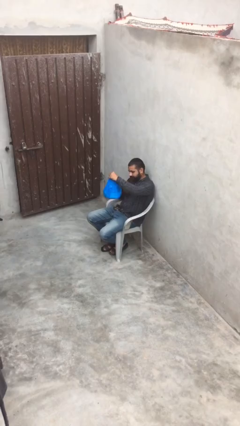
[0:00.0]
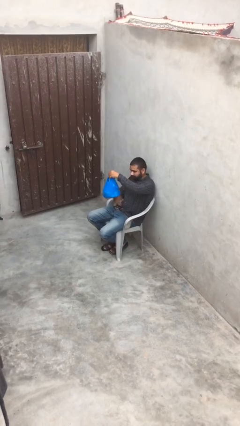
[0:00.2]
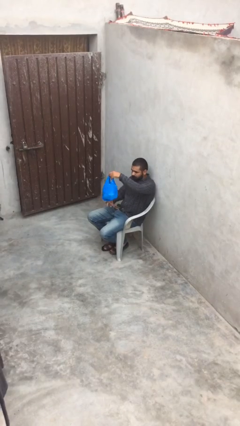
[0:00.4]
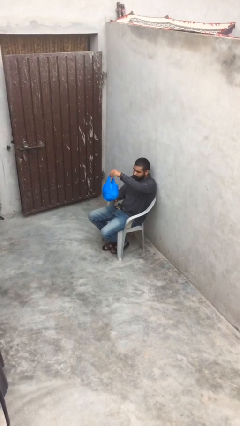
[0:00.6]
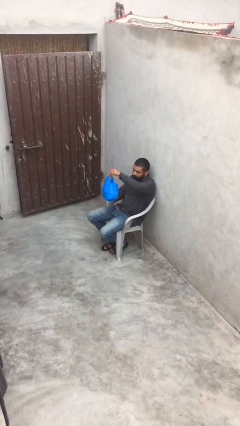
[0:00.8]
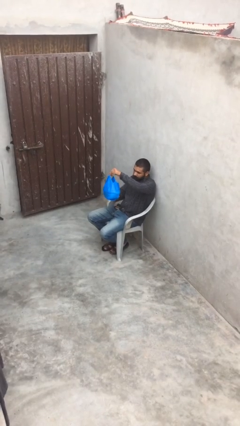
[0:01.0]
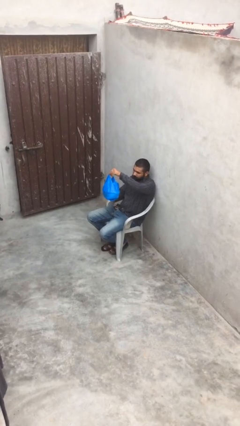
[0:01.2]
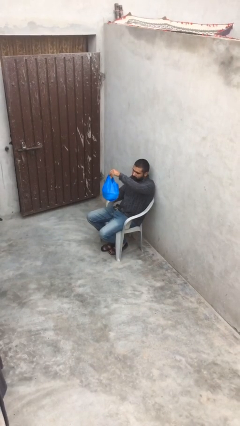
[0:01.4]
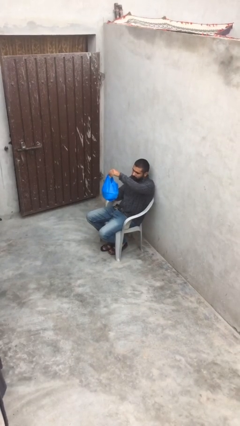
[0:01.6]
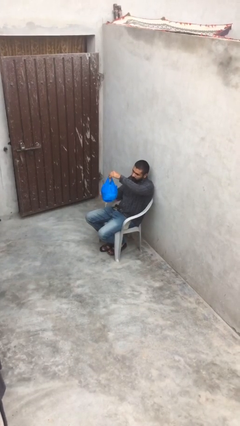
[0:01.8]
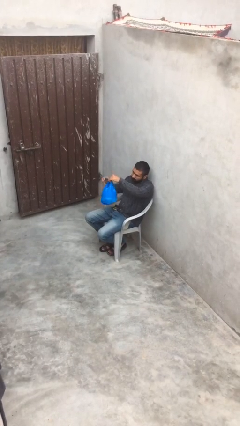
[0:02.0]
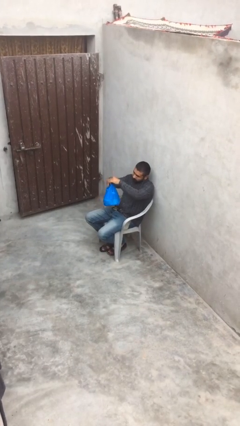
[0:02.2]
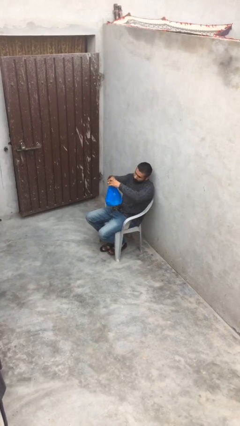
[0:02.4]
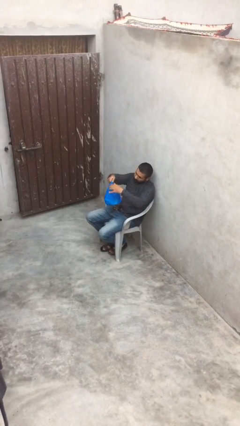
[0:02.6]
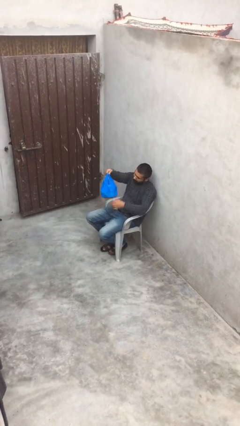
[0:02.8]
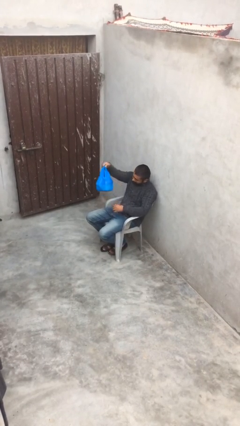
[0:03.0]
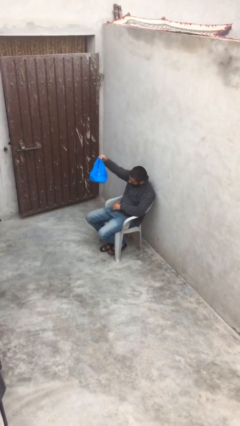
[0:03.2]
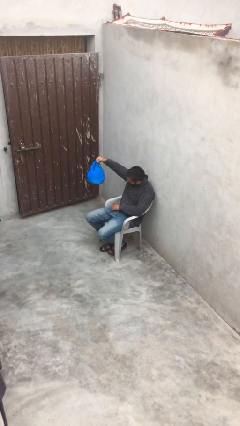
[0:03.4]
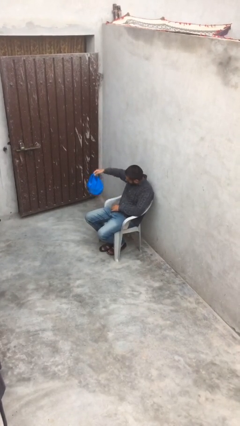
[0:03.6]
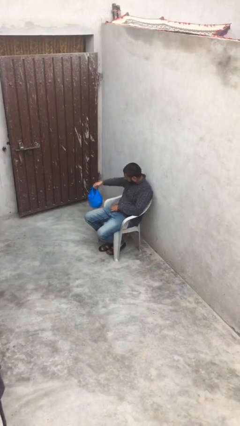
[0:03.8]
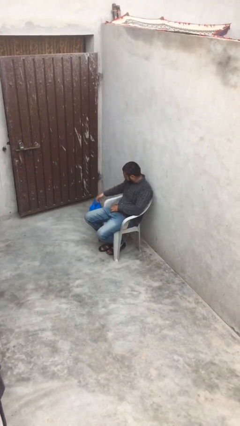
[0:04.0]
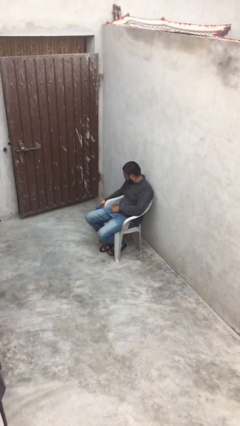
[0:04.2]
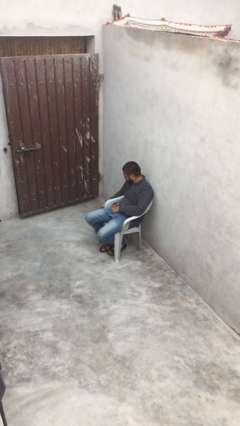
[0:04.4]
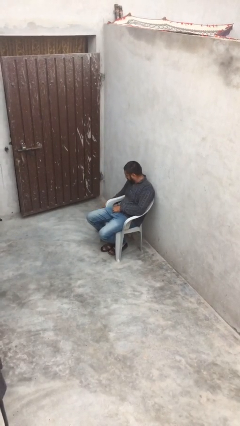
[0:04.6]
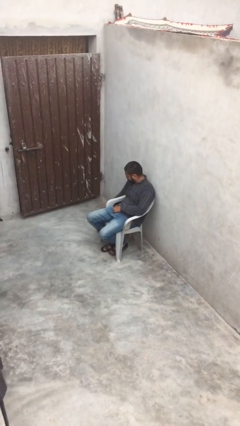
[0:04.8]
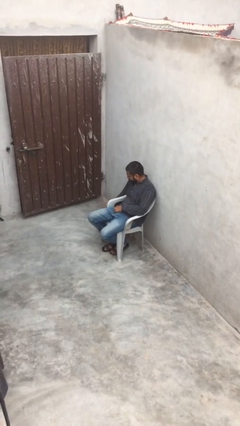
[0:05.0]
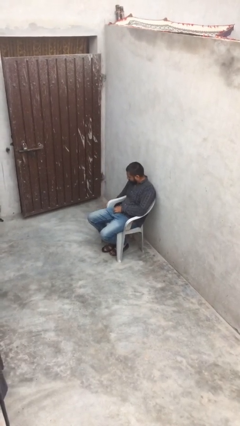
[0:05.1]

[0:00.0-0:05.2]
person puts down object on floor

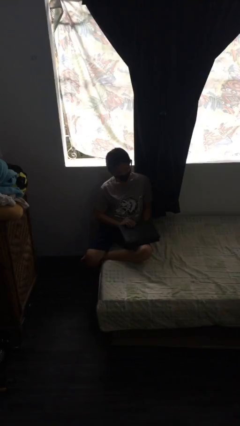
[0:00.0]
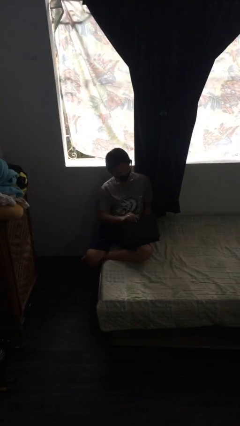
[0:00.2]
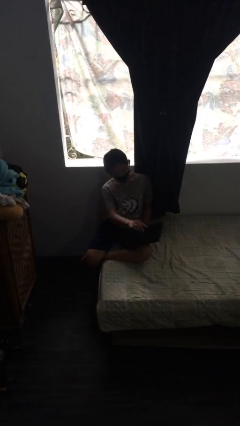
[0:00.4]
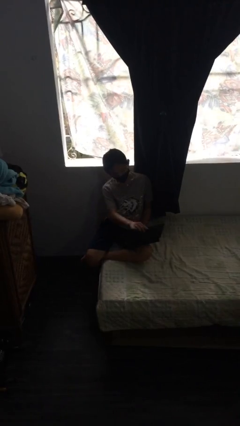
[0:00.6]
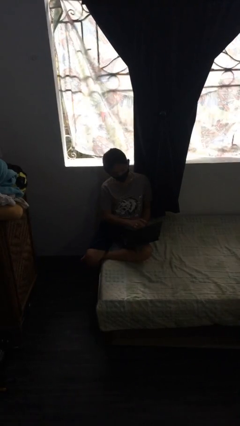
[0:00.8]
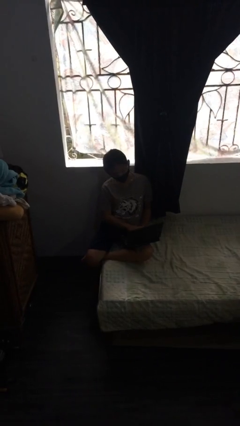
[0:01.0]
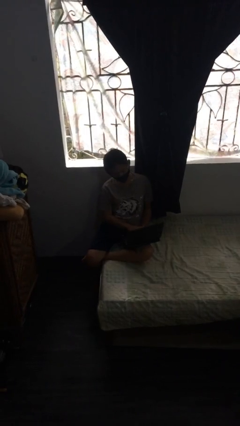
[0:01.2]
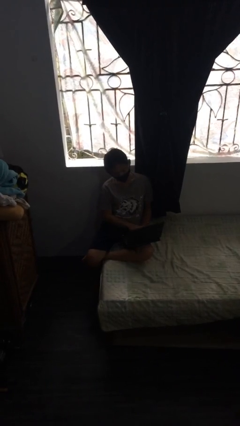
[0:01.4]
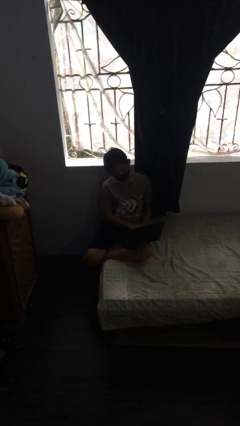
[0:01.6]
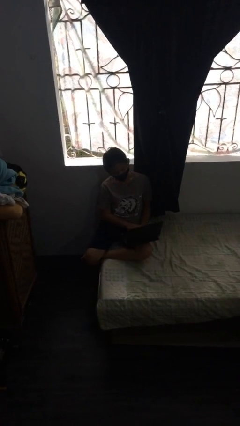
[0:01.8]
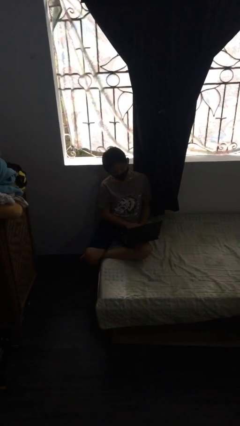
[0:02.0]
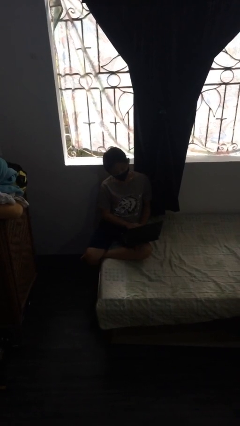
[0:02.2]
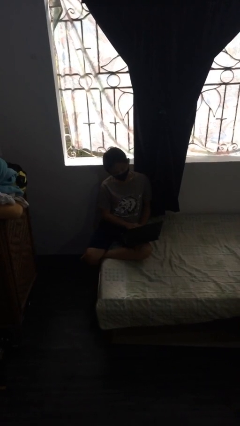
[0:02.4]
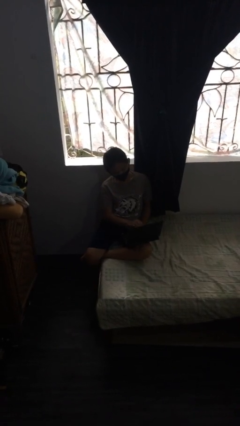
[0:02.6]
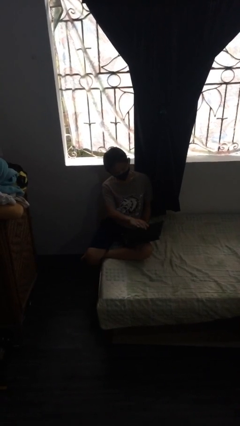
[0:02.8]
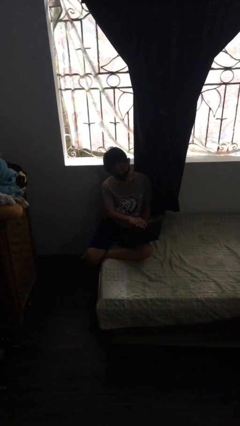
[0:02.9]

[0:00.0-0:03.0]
person interacts with laptop

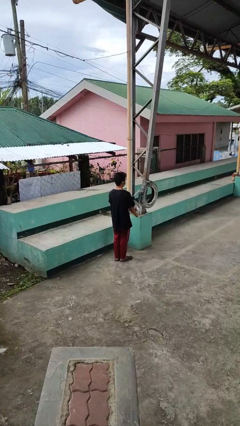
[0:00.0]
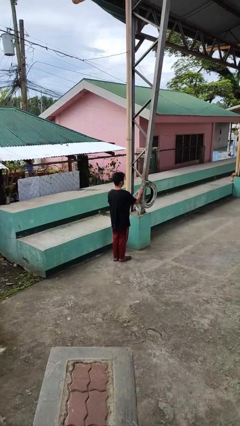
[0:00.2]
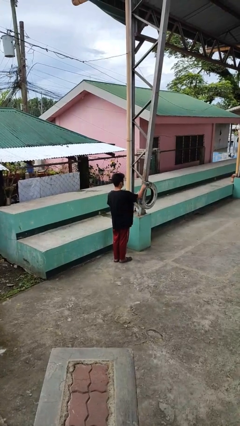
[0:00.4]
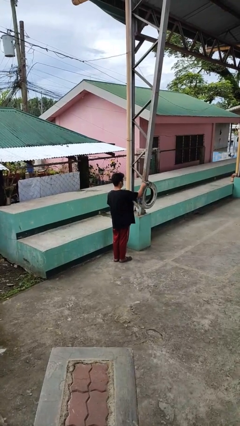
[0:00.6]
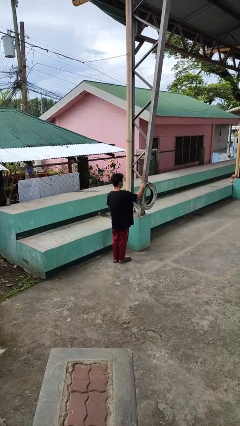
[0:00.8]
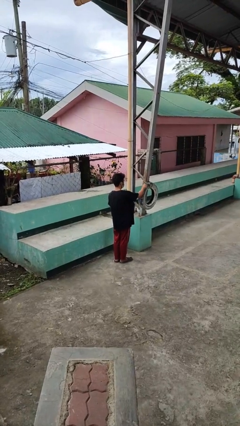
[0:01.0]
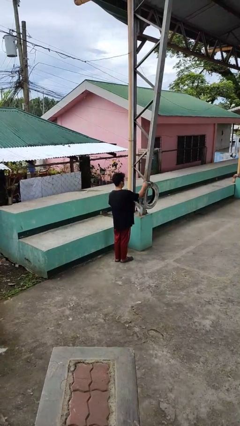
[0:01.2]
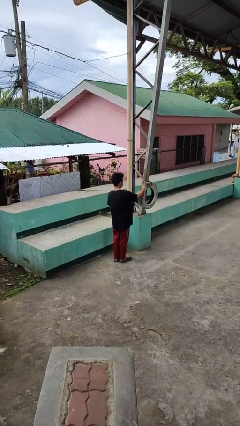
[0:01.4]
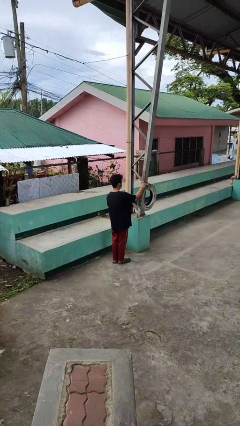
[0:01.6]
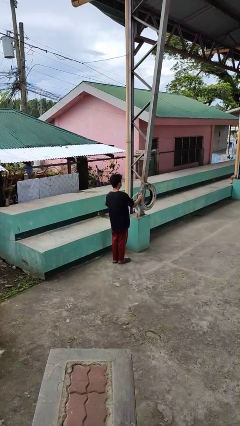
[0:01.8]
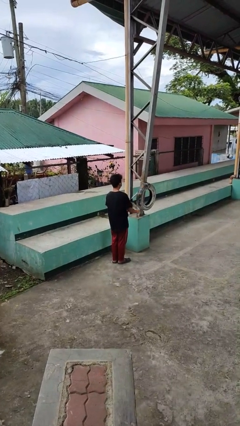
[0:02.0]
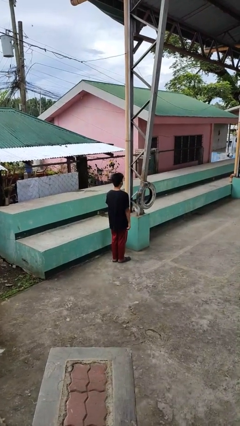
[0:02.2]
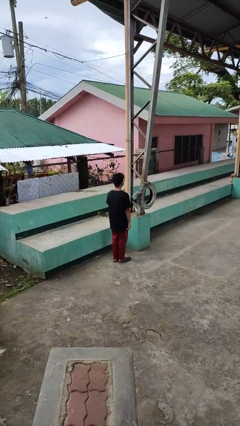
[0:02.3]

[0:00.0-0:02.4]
person taps object with finger

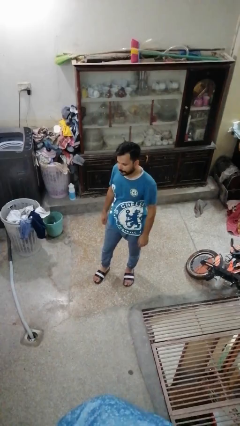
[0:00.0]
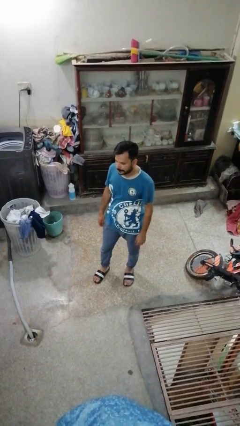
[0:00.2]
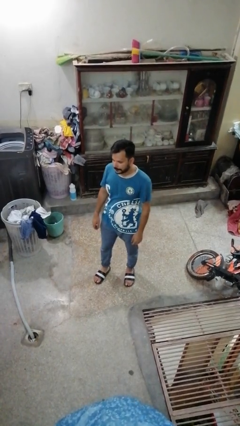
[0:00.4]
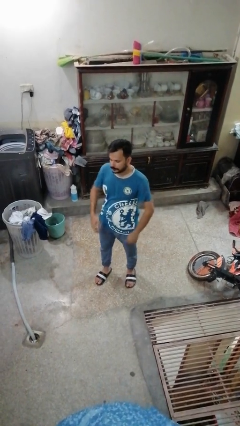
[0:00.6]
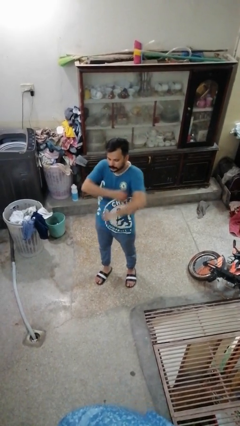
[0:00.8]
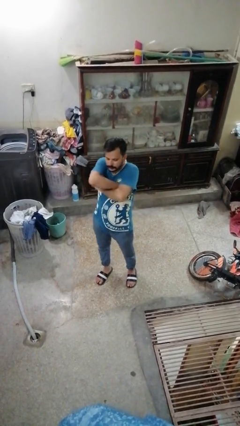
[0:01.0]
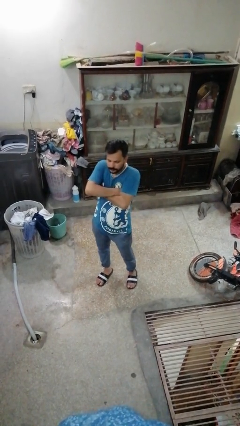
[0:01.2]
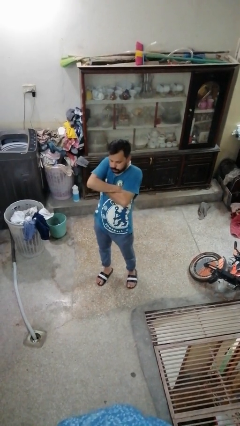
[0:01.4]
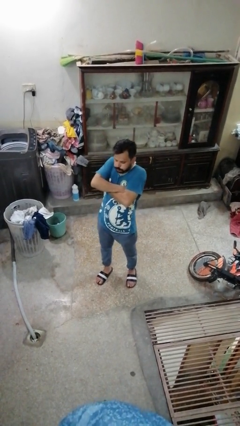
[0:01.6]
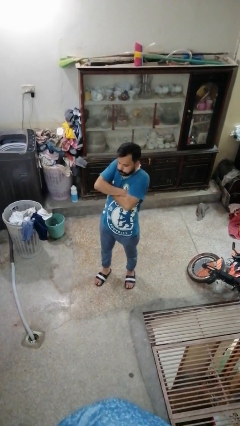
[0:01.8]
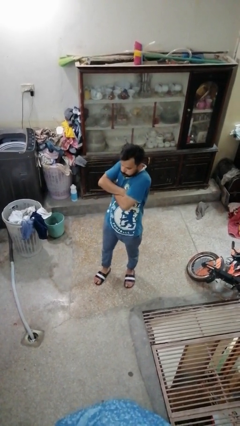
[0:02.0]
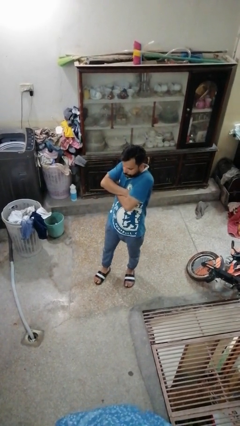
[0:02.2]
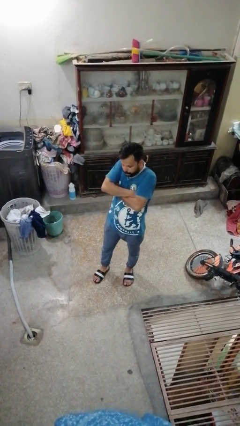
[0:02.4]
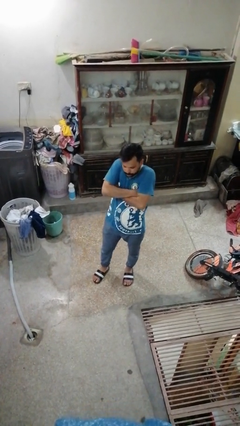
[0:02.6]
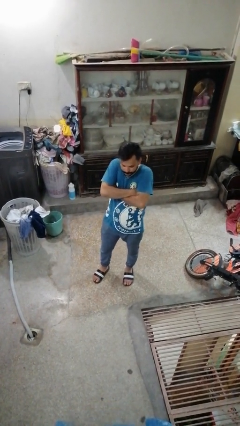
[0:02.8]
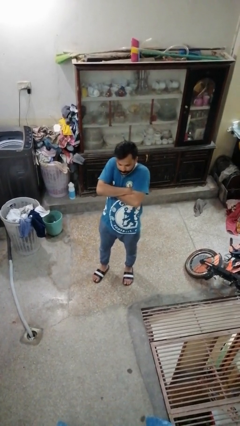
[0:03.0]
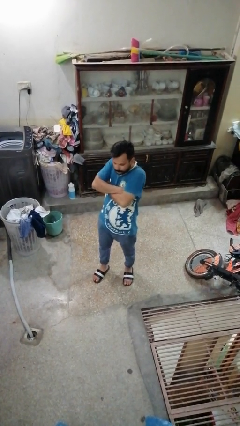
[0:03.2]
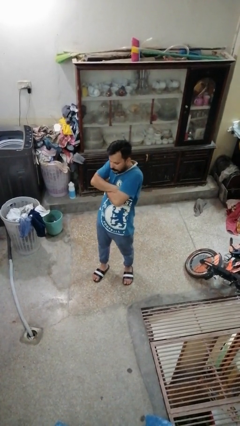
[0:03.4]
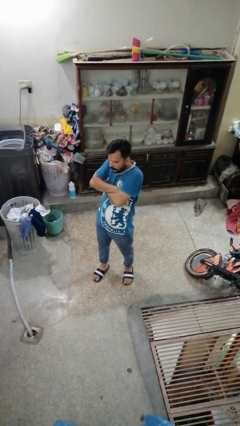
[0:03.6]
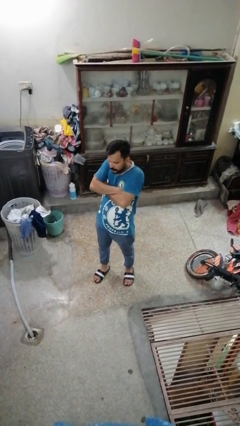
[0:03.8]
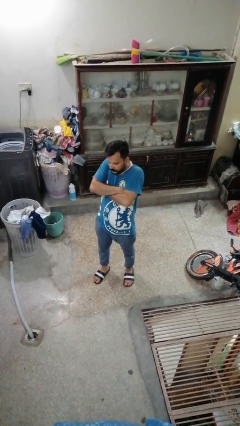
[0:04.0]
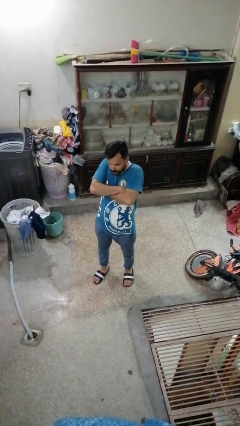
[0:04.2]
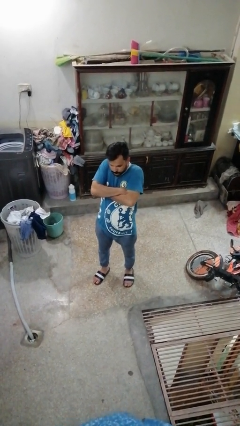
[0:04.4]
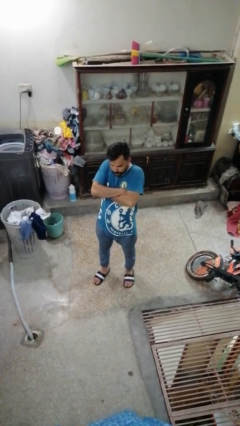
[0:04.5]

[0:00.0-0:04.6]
person blows into hands

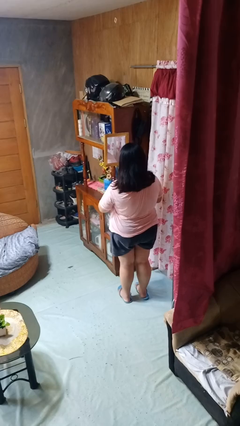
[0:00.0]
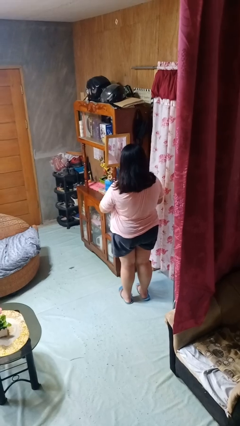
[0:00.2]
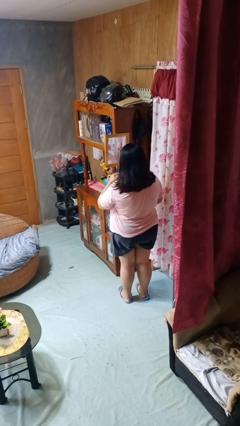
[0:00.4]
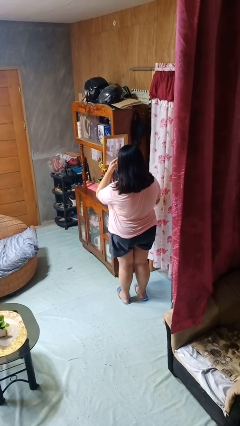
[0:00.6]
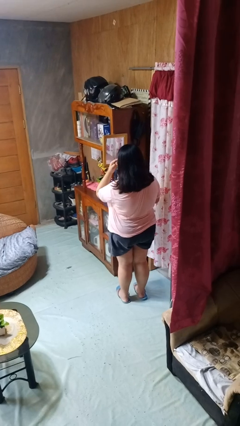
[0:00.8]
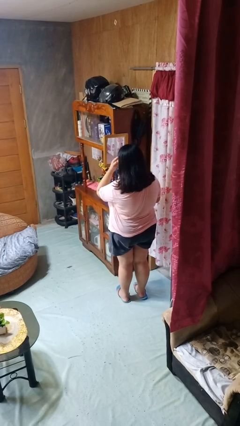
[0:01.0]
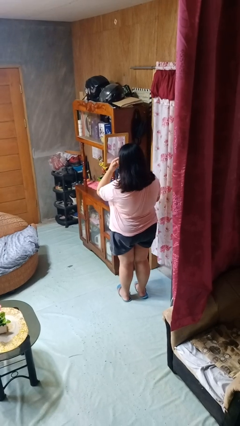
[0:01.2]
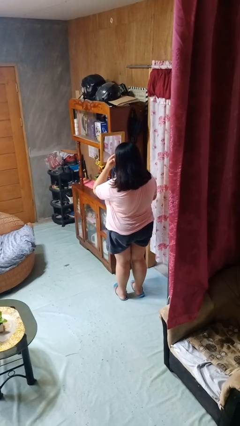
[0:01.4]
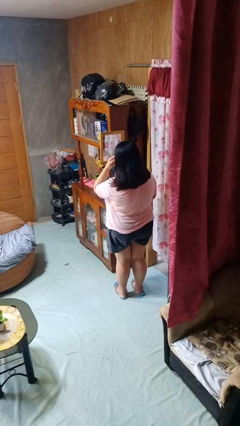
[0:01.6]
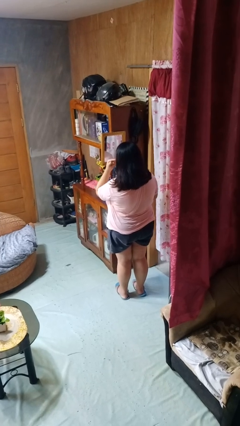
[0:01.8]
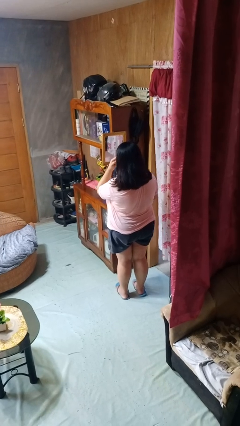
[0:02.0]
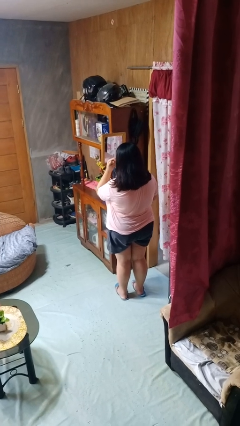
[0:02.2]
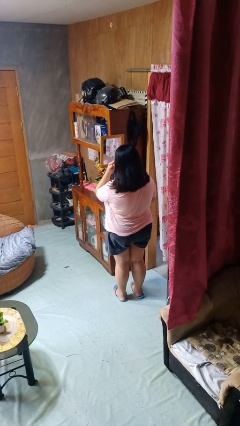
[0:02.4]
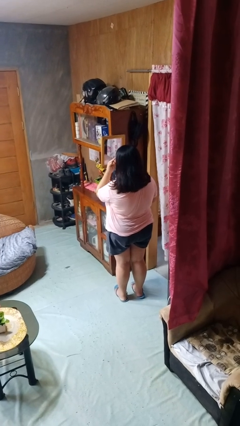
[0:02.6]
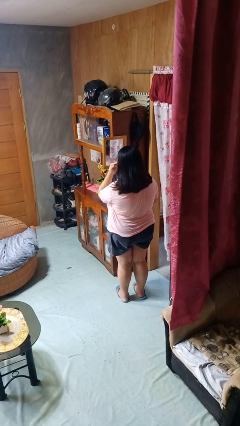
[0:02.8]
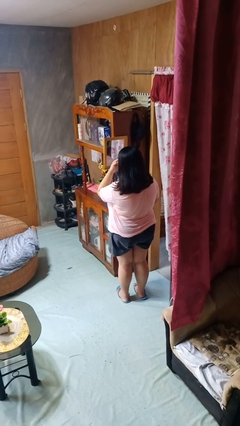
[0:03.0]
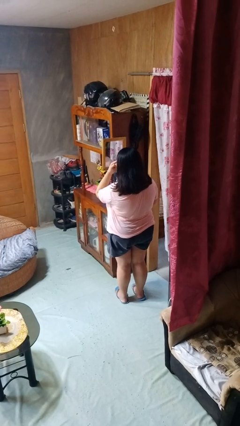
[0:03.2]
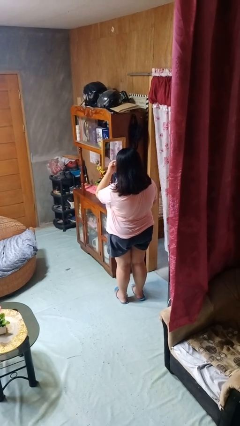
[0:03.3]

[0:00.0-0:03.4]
person applies eye makeup
